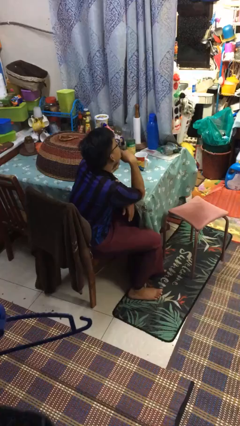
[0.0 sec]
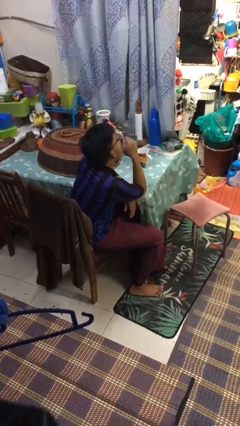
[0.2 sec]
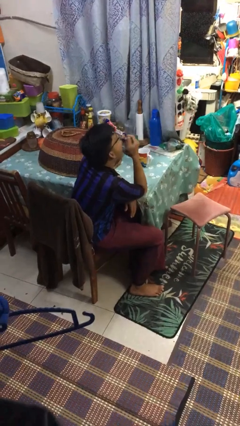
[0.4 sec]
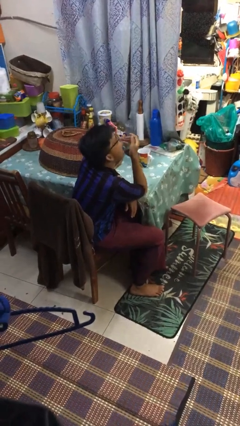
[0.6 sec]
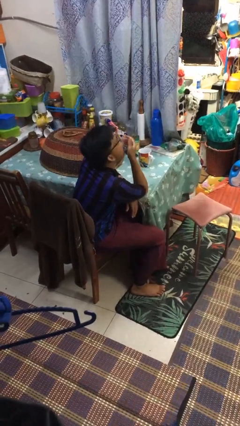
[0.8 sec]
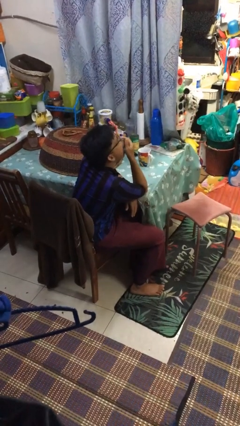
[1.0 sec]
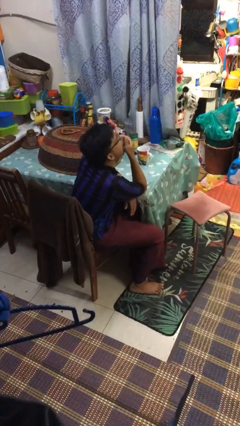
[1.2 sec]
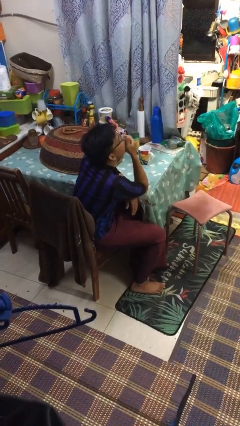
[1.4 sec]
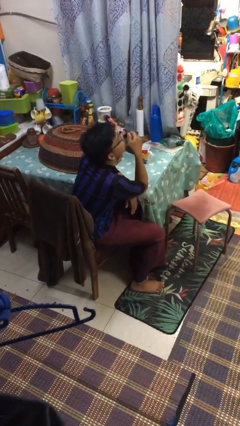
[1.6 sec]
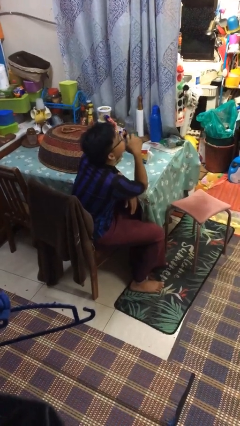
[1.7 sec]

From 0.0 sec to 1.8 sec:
person yawns

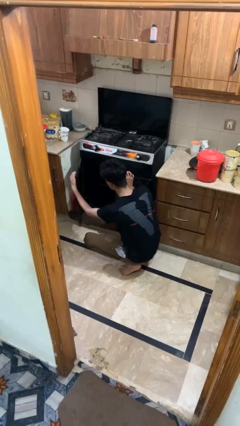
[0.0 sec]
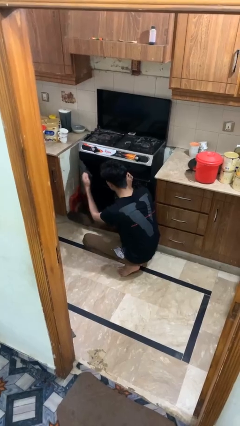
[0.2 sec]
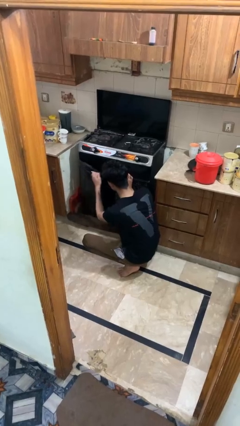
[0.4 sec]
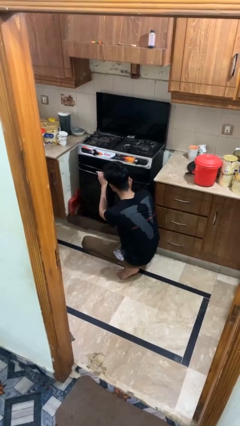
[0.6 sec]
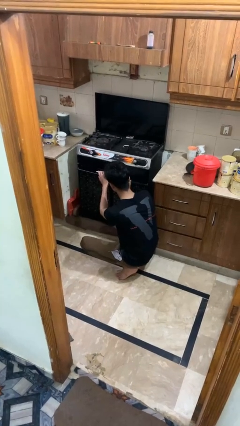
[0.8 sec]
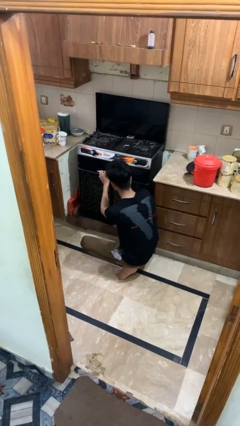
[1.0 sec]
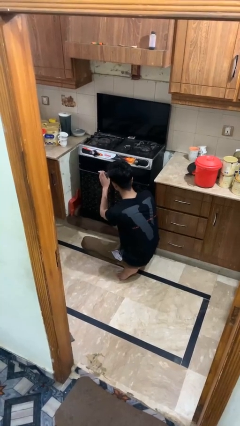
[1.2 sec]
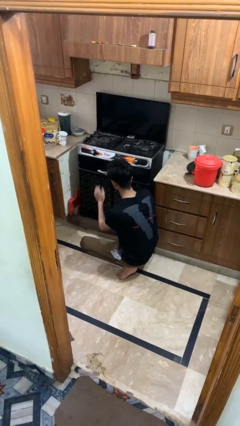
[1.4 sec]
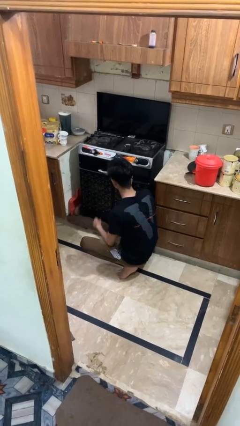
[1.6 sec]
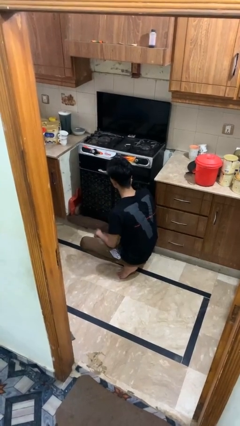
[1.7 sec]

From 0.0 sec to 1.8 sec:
person closes oven door

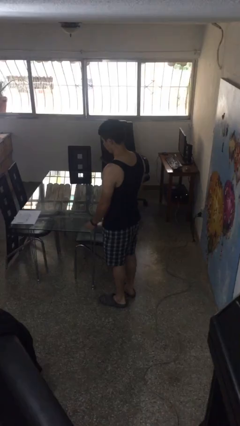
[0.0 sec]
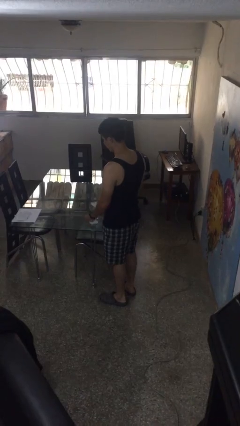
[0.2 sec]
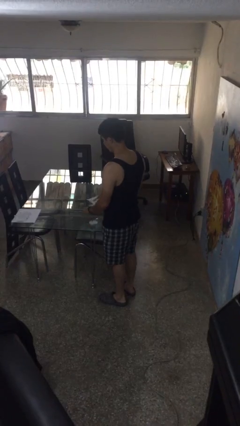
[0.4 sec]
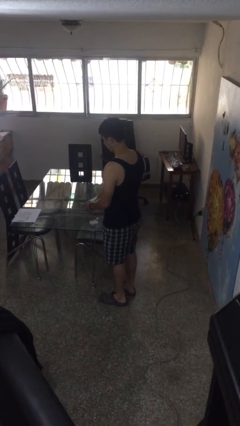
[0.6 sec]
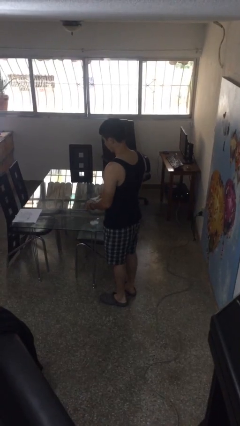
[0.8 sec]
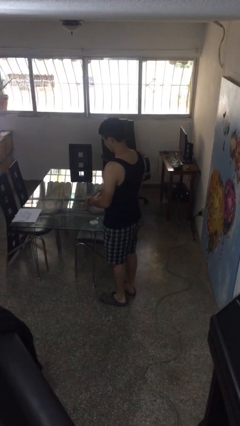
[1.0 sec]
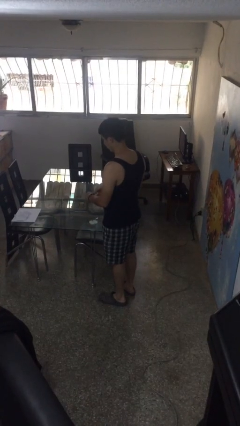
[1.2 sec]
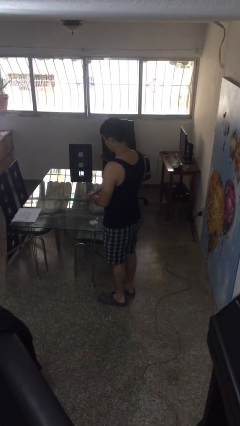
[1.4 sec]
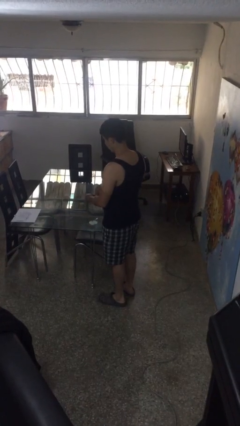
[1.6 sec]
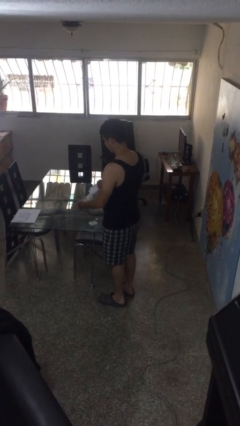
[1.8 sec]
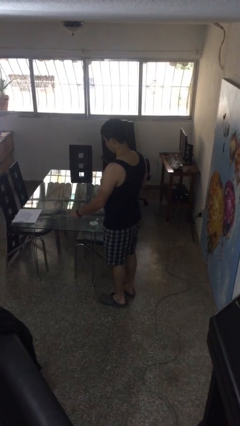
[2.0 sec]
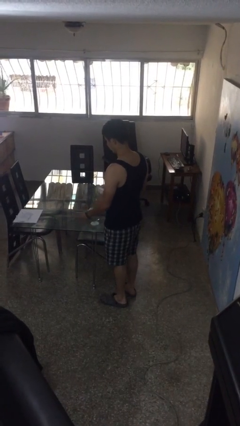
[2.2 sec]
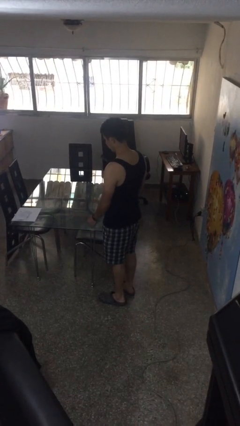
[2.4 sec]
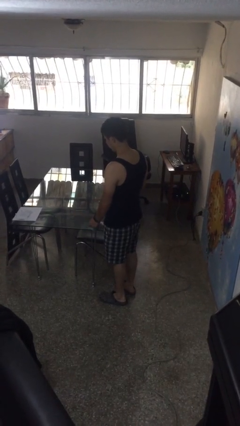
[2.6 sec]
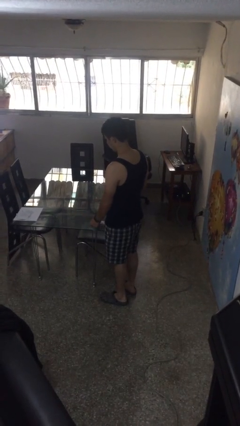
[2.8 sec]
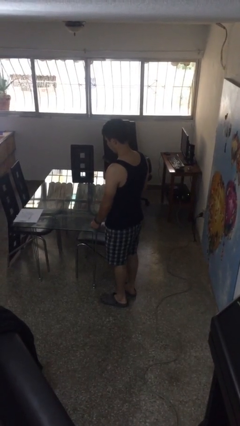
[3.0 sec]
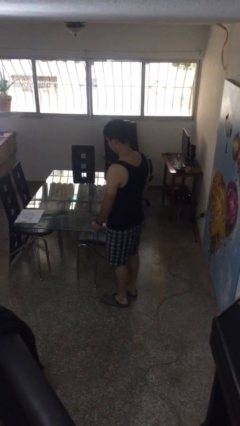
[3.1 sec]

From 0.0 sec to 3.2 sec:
person tears paper

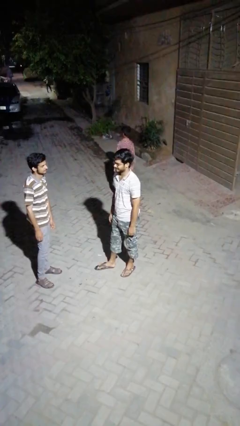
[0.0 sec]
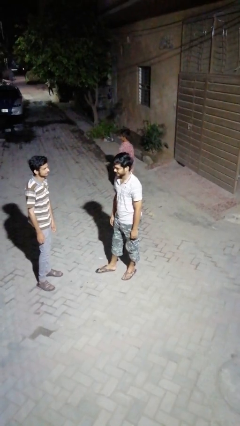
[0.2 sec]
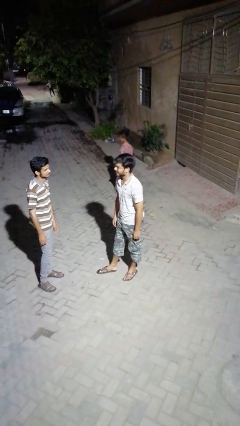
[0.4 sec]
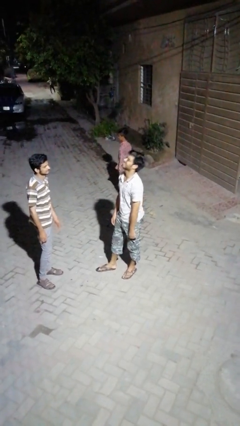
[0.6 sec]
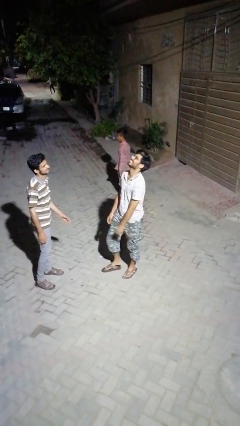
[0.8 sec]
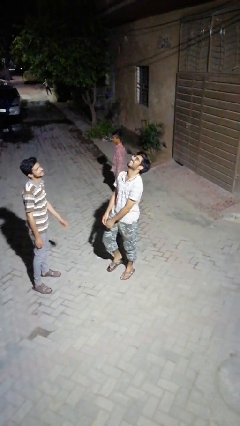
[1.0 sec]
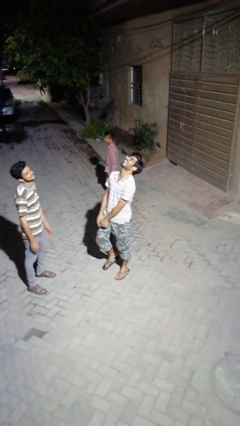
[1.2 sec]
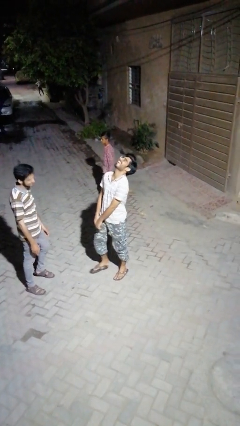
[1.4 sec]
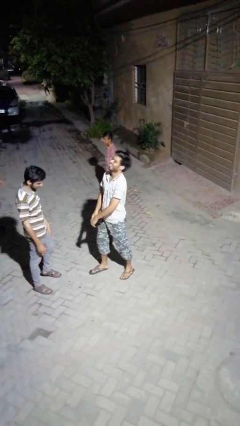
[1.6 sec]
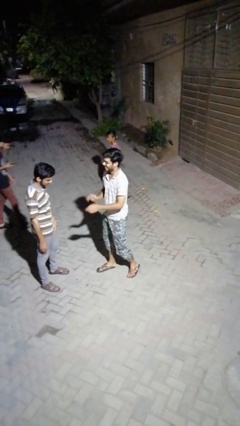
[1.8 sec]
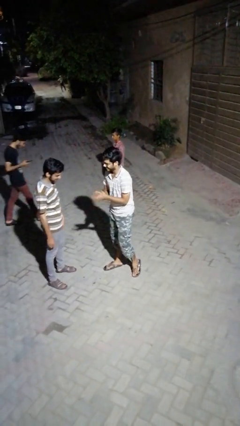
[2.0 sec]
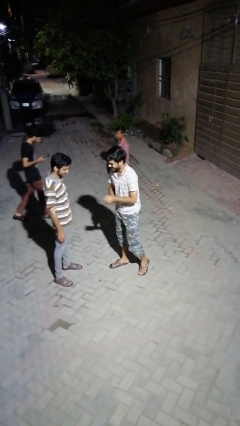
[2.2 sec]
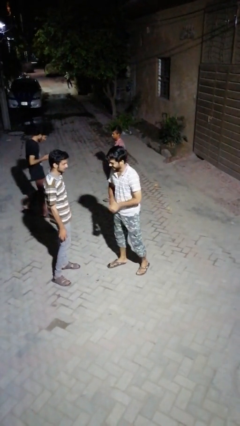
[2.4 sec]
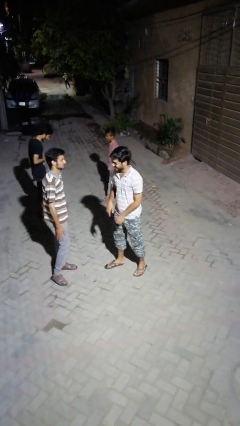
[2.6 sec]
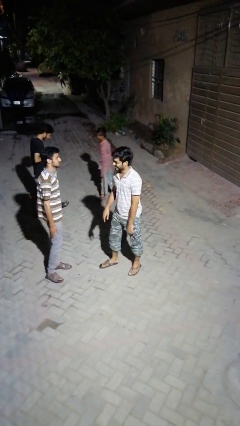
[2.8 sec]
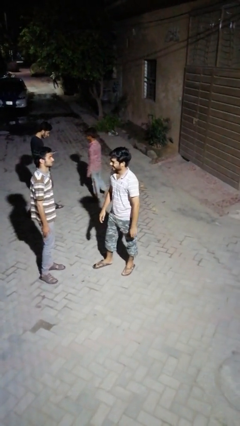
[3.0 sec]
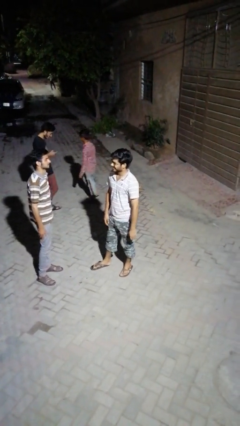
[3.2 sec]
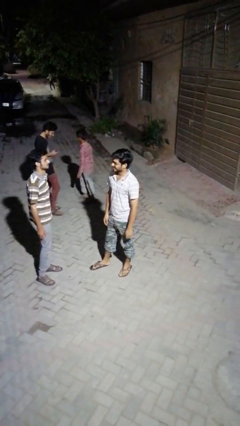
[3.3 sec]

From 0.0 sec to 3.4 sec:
person laughs with person

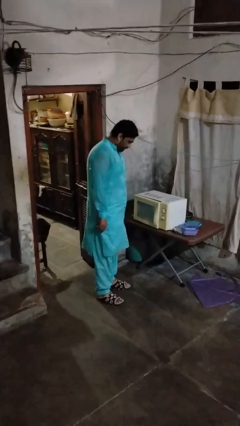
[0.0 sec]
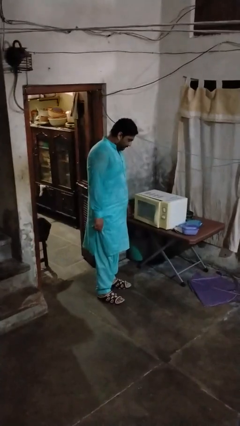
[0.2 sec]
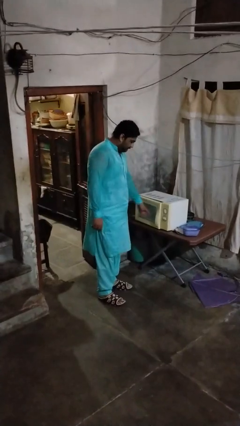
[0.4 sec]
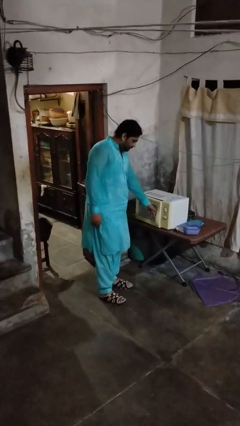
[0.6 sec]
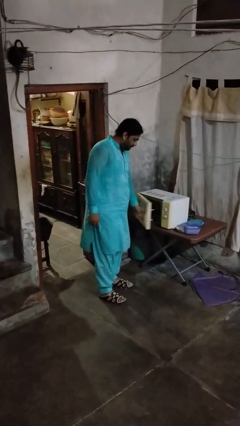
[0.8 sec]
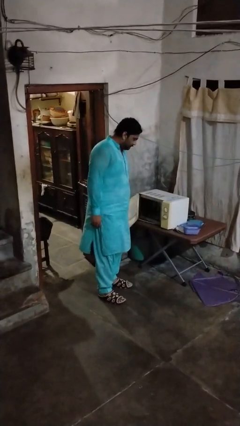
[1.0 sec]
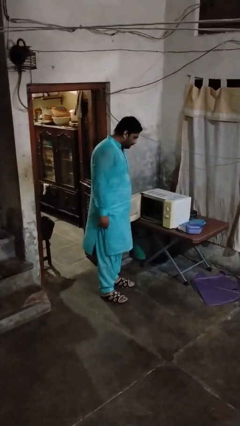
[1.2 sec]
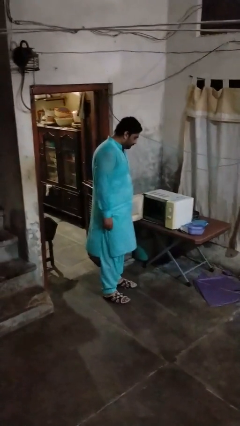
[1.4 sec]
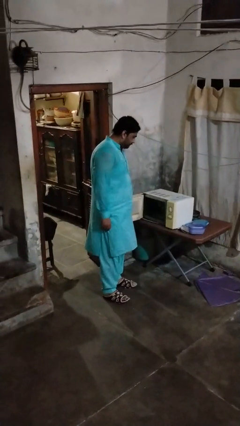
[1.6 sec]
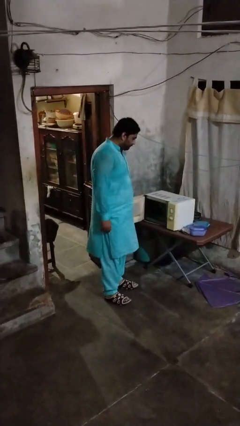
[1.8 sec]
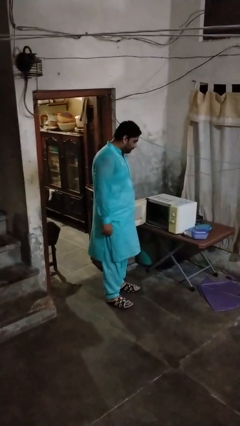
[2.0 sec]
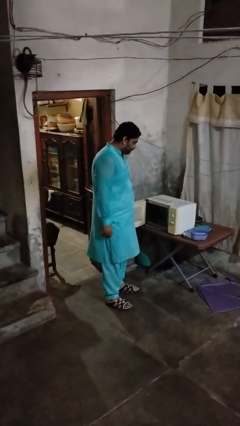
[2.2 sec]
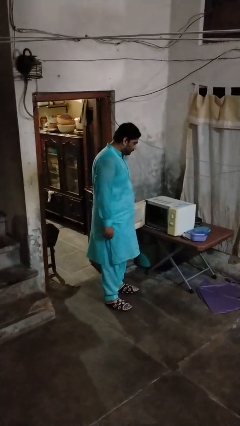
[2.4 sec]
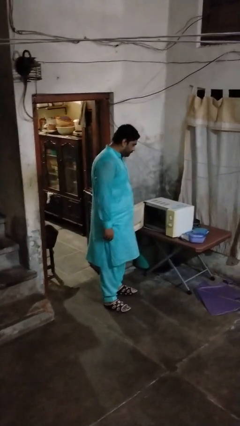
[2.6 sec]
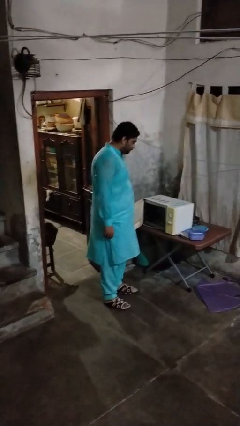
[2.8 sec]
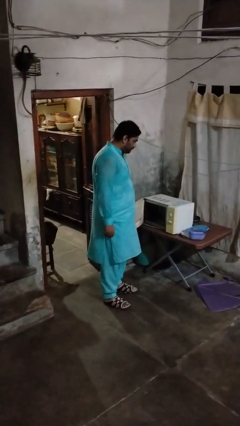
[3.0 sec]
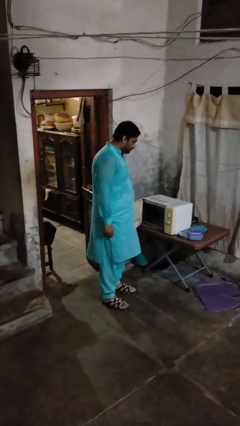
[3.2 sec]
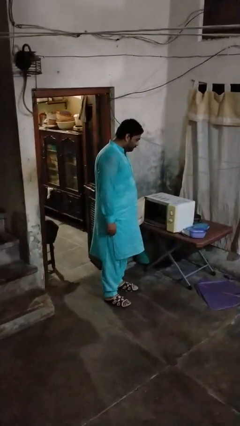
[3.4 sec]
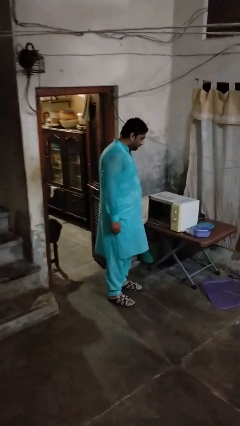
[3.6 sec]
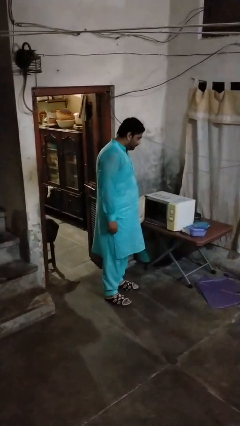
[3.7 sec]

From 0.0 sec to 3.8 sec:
person opens microwave

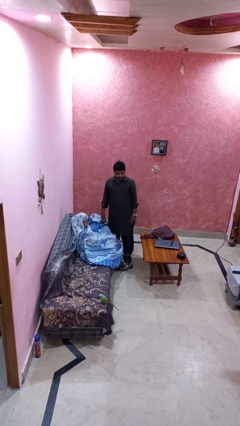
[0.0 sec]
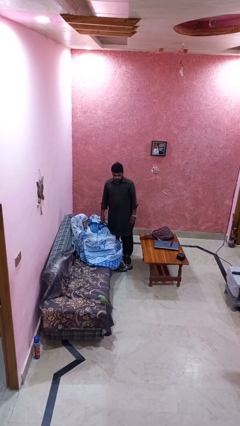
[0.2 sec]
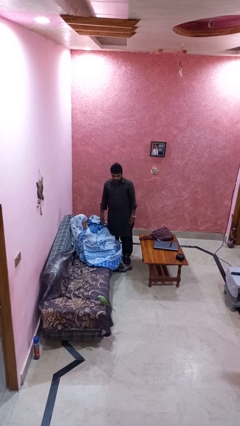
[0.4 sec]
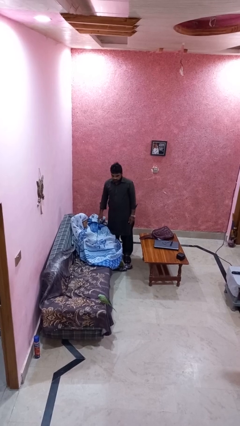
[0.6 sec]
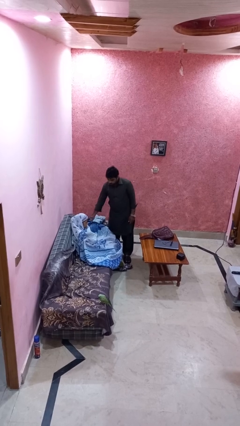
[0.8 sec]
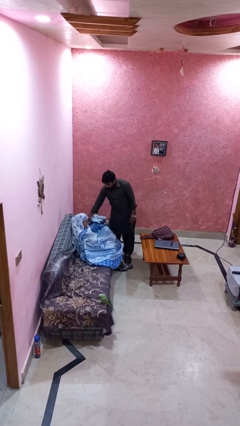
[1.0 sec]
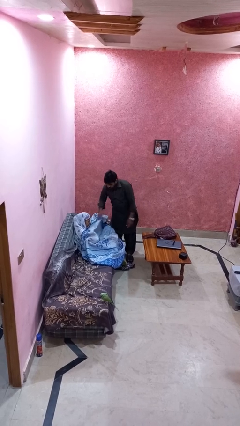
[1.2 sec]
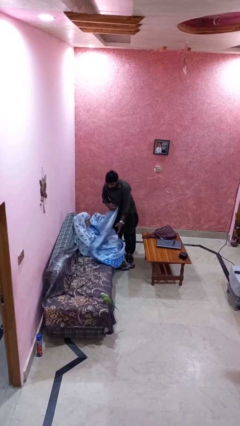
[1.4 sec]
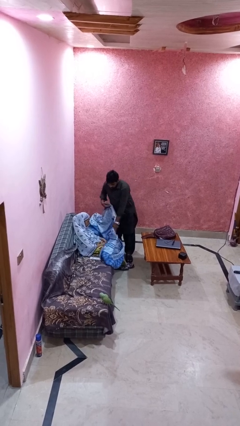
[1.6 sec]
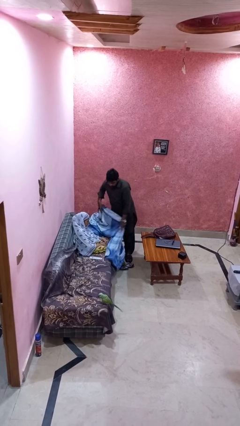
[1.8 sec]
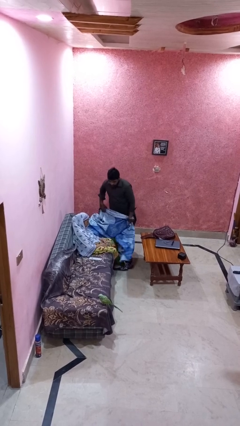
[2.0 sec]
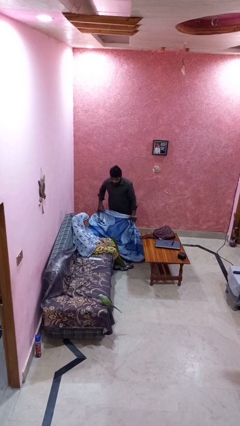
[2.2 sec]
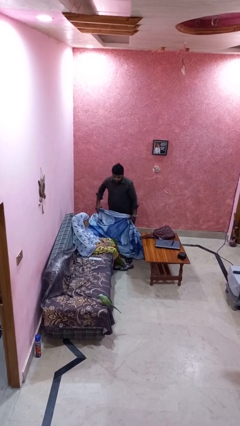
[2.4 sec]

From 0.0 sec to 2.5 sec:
person uncovers friend with blanket

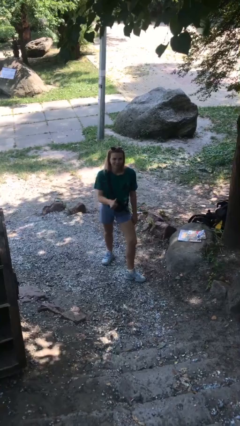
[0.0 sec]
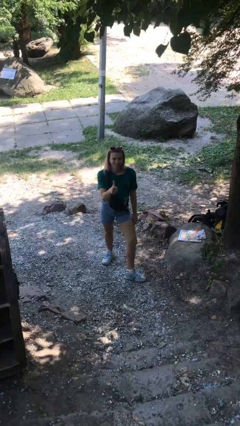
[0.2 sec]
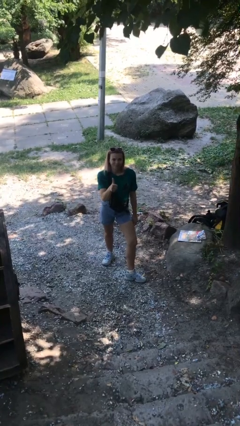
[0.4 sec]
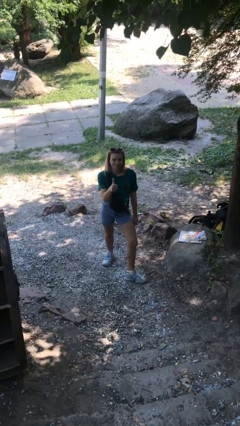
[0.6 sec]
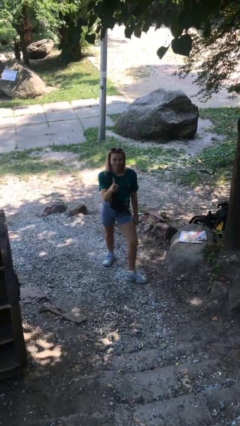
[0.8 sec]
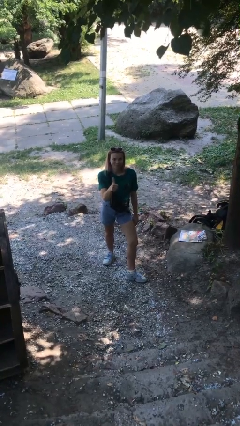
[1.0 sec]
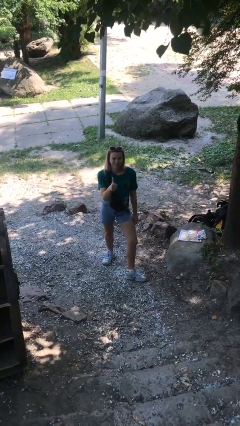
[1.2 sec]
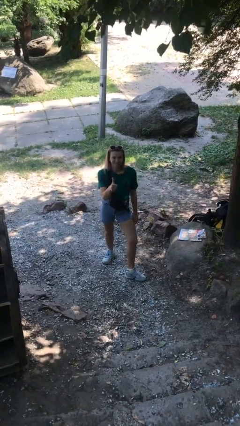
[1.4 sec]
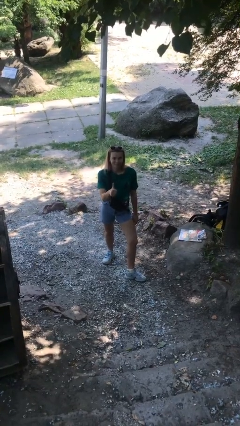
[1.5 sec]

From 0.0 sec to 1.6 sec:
person gestures thumbs up
